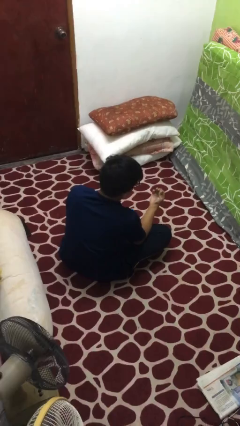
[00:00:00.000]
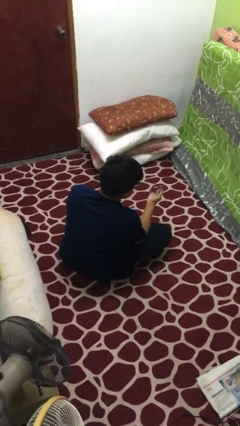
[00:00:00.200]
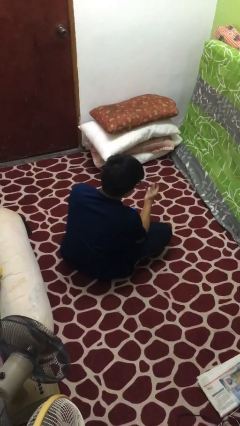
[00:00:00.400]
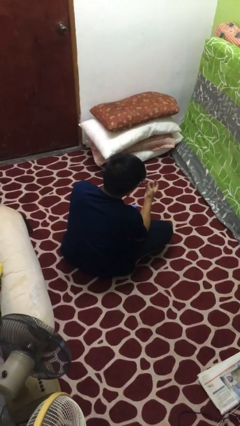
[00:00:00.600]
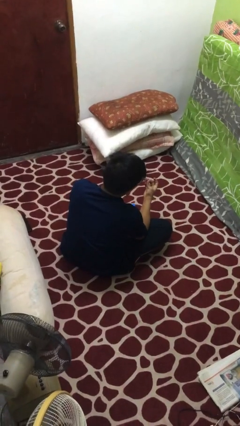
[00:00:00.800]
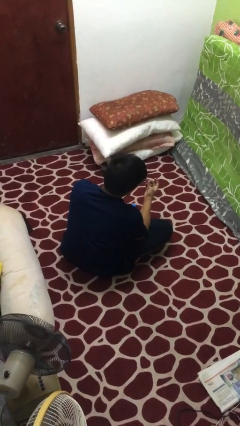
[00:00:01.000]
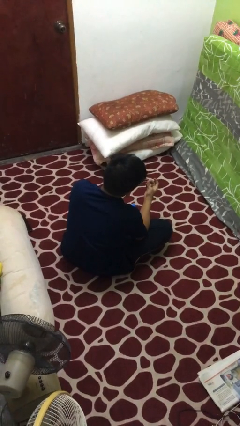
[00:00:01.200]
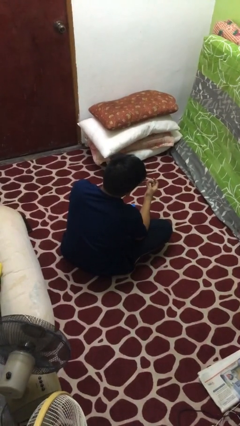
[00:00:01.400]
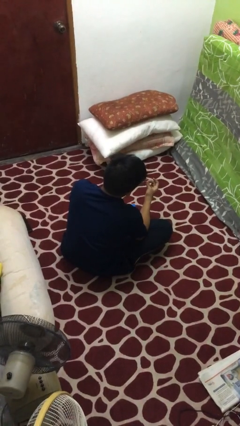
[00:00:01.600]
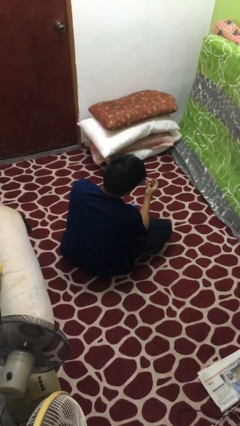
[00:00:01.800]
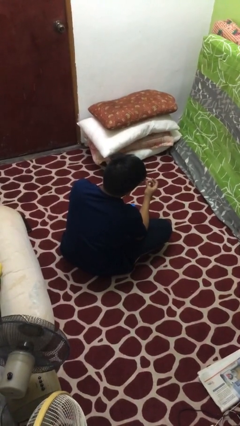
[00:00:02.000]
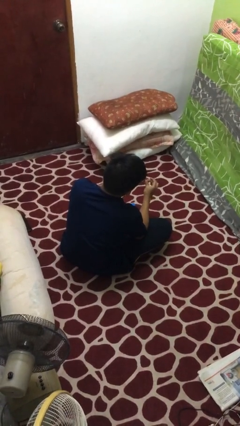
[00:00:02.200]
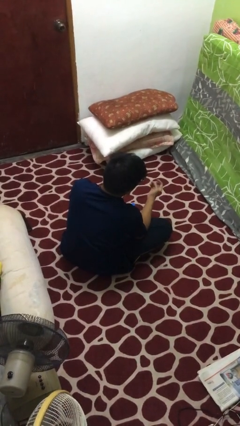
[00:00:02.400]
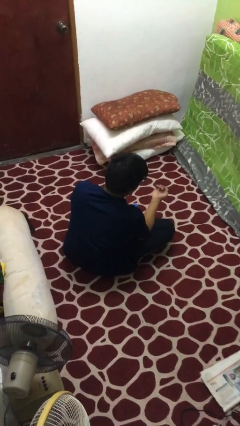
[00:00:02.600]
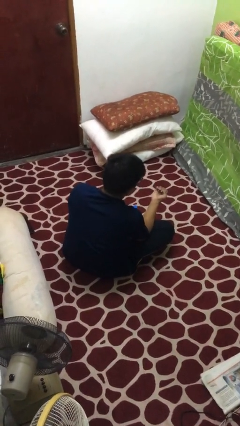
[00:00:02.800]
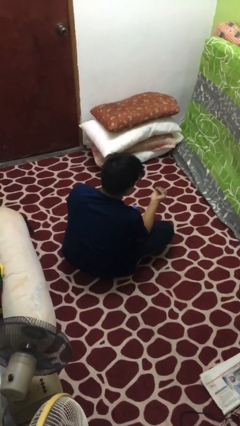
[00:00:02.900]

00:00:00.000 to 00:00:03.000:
person clips fingernails

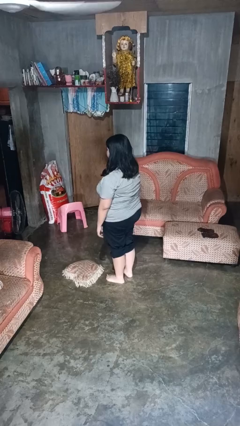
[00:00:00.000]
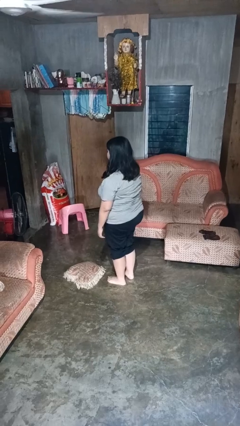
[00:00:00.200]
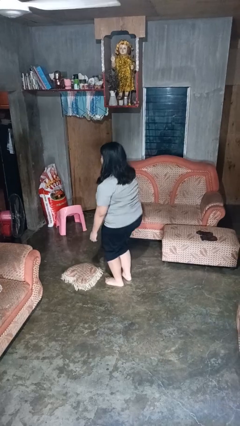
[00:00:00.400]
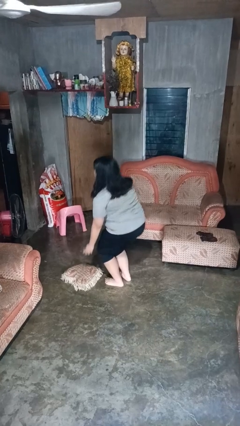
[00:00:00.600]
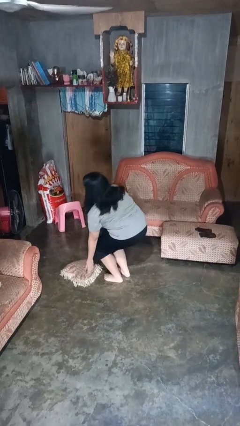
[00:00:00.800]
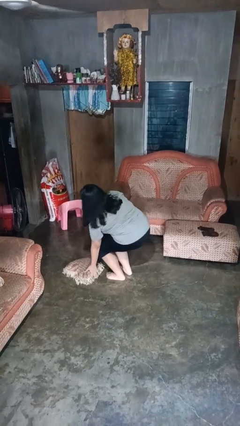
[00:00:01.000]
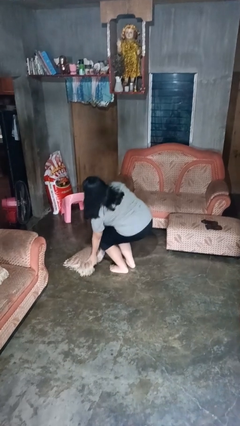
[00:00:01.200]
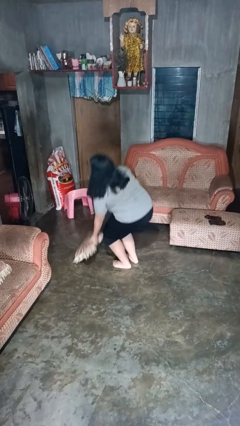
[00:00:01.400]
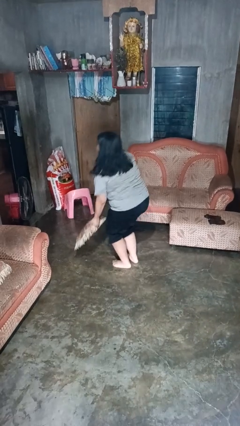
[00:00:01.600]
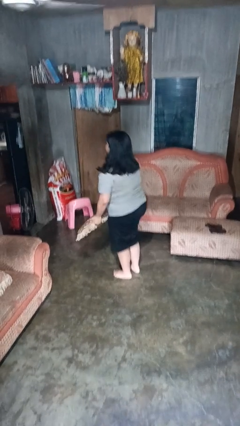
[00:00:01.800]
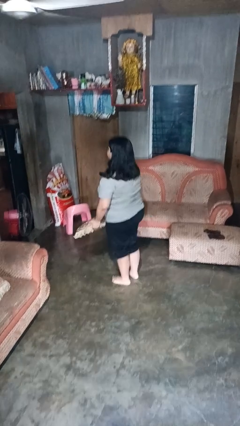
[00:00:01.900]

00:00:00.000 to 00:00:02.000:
person picks up object from floor

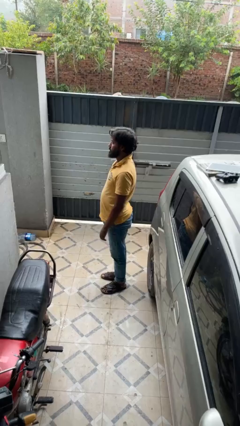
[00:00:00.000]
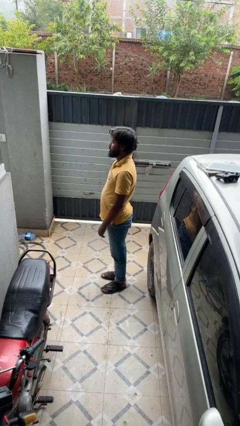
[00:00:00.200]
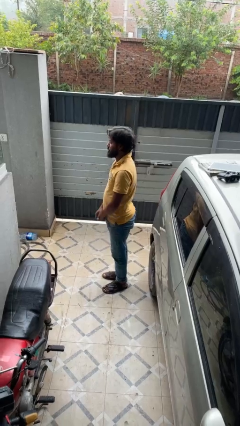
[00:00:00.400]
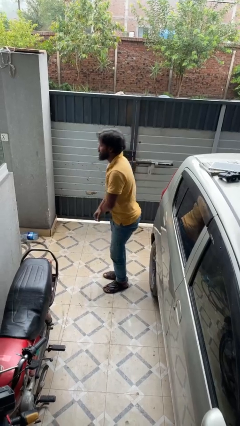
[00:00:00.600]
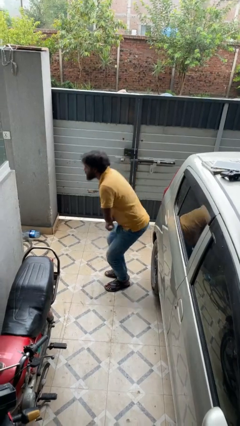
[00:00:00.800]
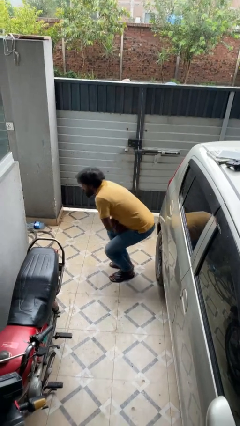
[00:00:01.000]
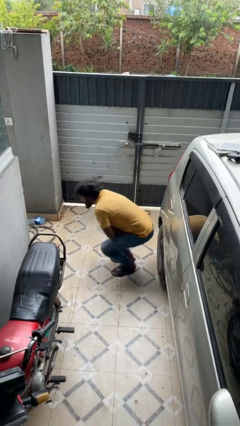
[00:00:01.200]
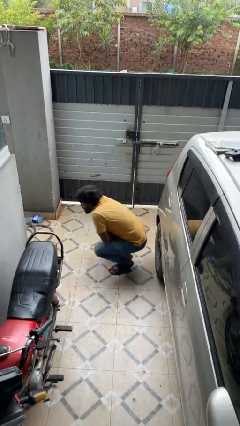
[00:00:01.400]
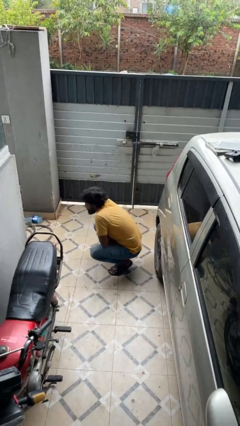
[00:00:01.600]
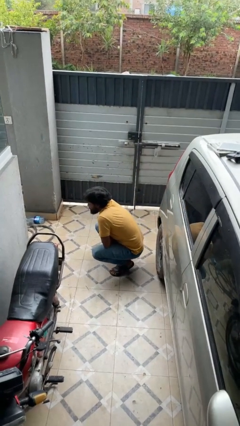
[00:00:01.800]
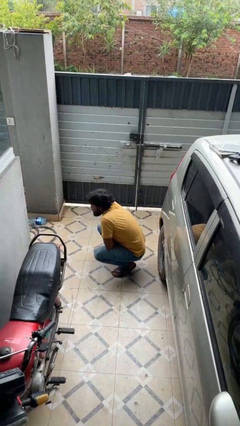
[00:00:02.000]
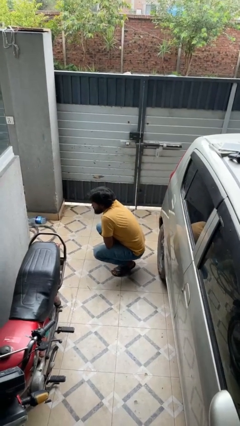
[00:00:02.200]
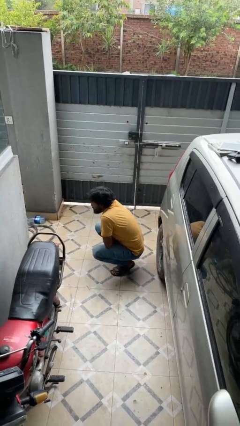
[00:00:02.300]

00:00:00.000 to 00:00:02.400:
person squats

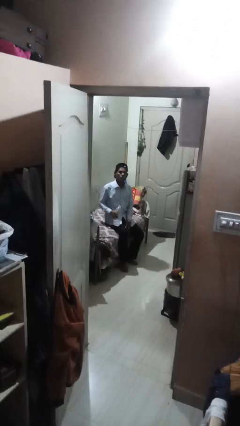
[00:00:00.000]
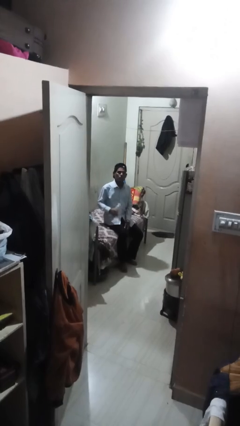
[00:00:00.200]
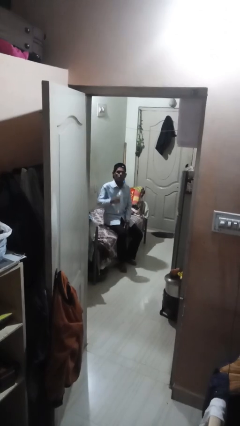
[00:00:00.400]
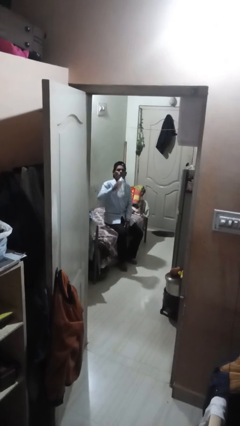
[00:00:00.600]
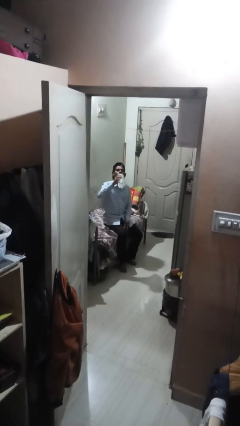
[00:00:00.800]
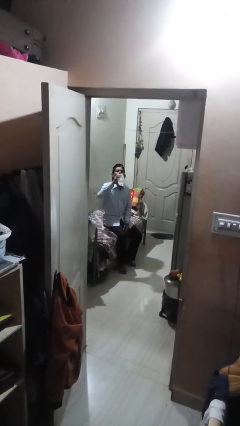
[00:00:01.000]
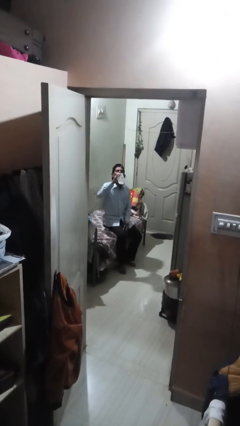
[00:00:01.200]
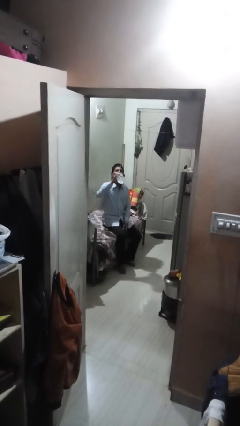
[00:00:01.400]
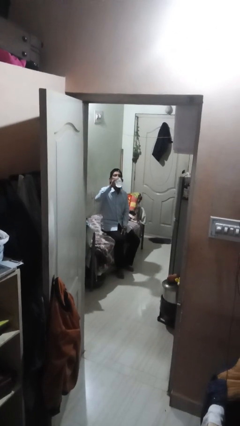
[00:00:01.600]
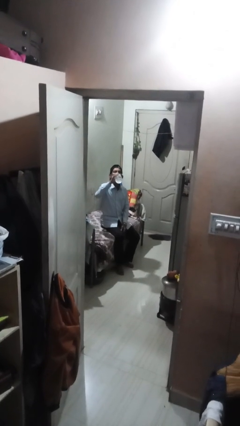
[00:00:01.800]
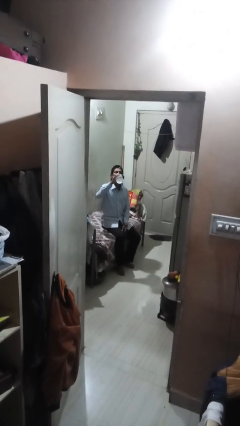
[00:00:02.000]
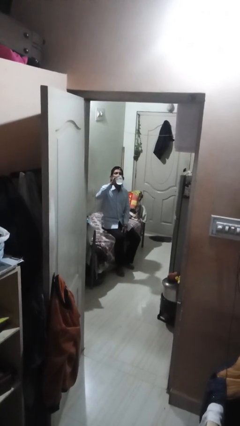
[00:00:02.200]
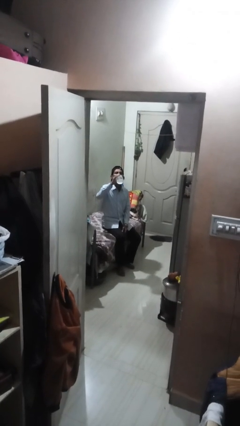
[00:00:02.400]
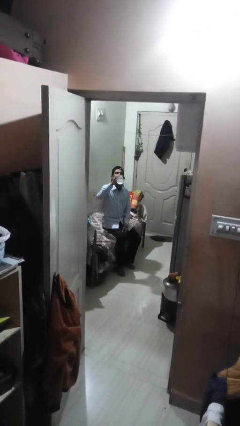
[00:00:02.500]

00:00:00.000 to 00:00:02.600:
person drinks from bottle

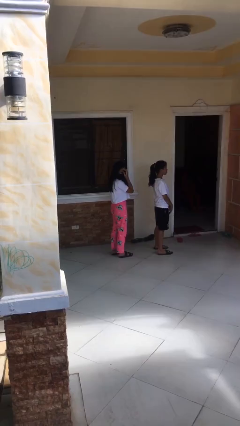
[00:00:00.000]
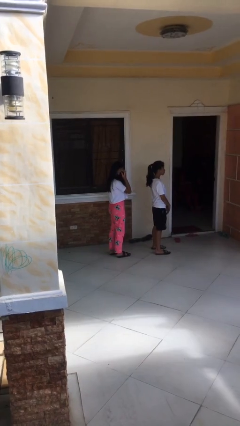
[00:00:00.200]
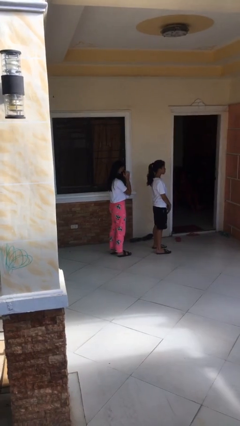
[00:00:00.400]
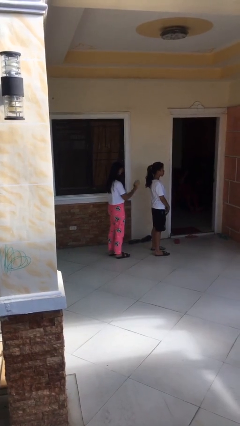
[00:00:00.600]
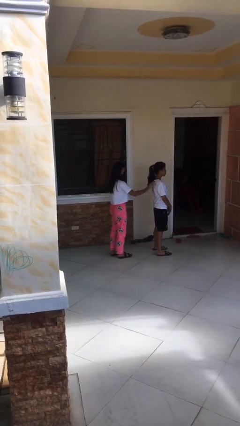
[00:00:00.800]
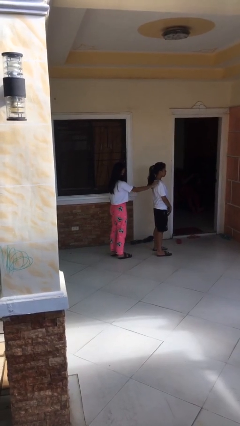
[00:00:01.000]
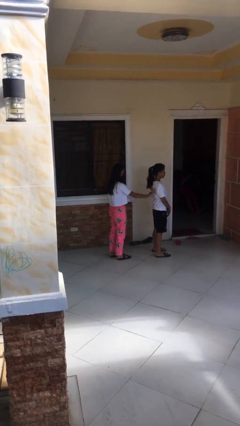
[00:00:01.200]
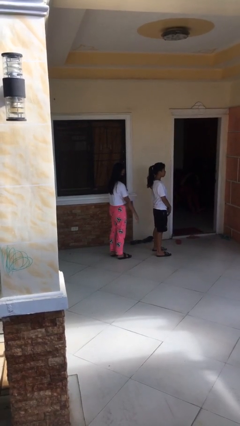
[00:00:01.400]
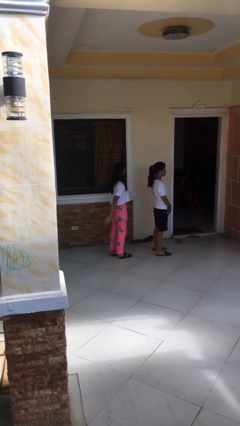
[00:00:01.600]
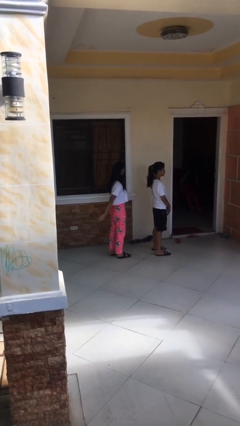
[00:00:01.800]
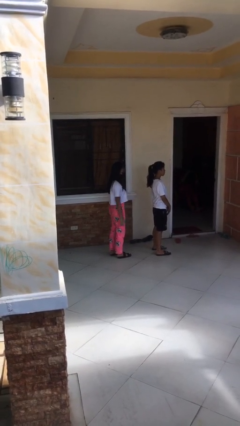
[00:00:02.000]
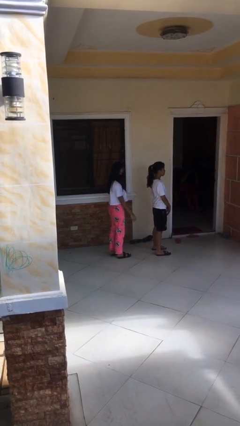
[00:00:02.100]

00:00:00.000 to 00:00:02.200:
person touches back of person

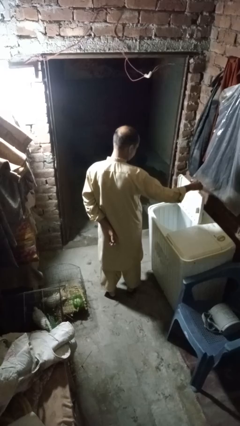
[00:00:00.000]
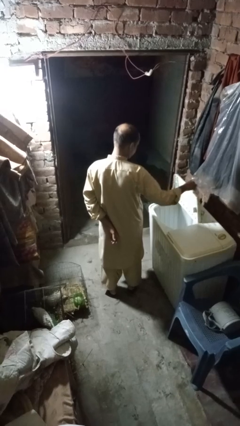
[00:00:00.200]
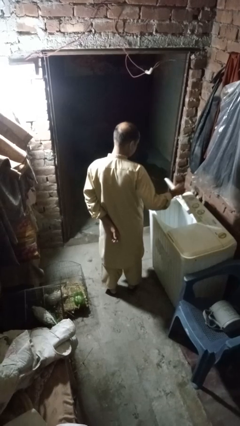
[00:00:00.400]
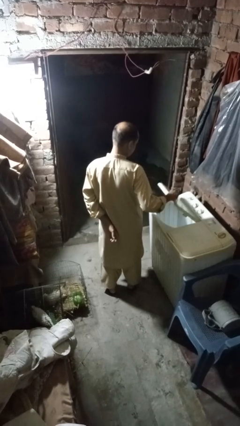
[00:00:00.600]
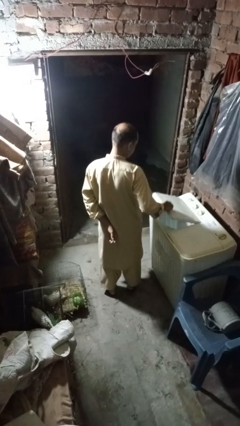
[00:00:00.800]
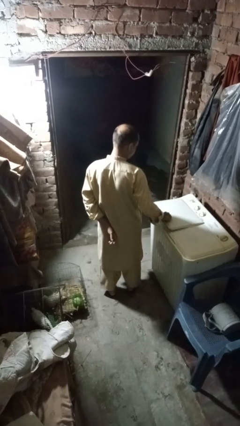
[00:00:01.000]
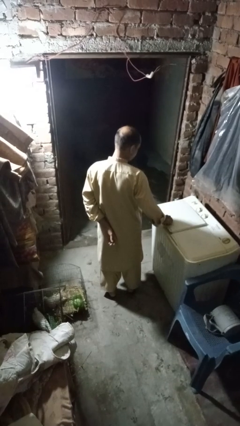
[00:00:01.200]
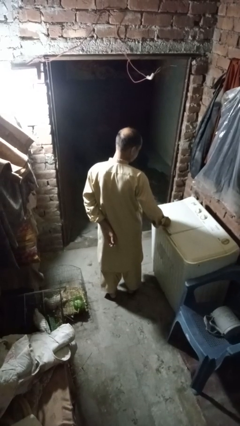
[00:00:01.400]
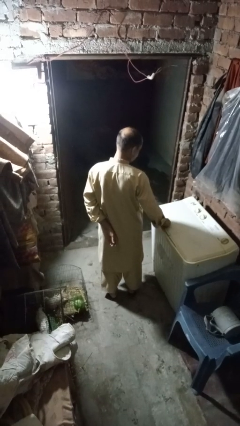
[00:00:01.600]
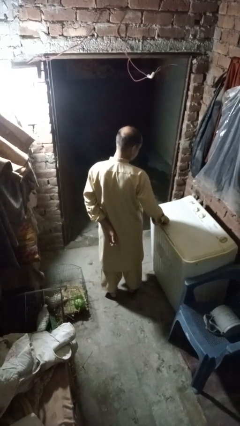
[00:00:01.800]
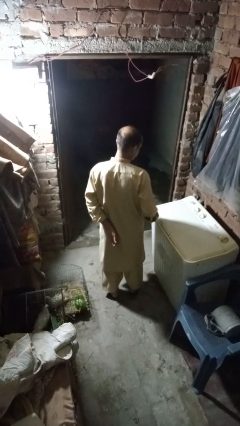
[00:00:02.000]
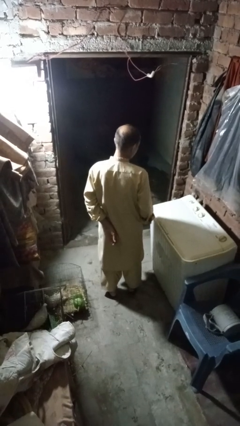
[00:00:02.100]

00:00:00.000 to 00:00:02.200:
person closes clothes washer

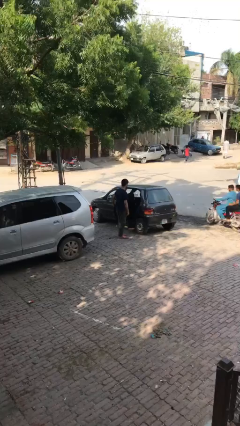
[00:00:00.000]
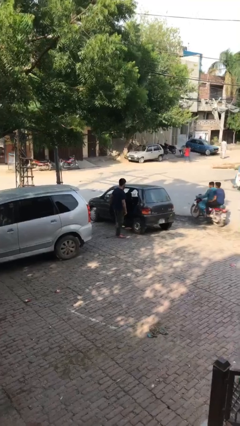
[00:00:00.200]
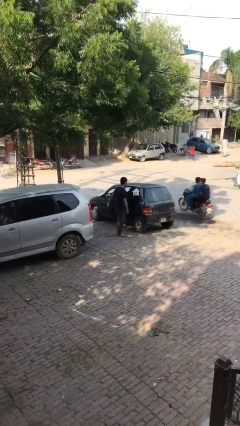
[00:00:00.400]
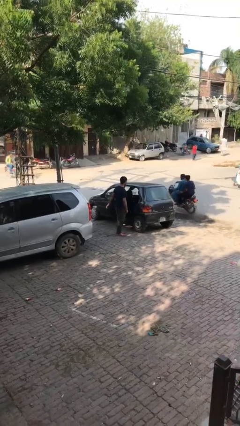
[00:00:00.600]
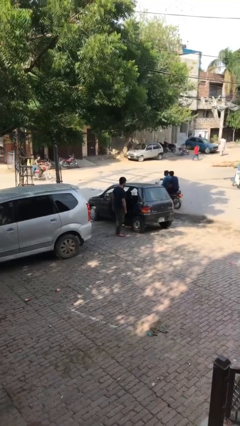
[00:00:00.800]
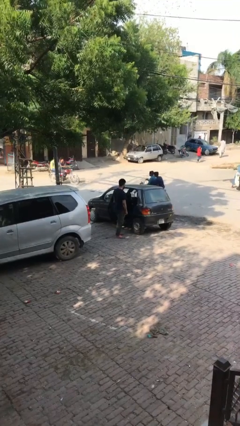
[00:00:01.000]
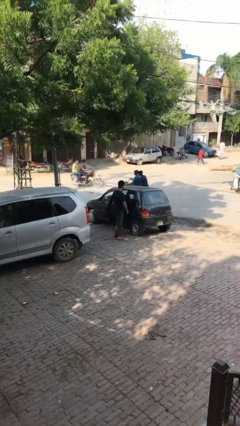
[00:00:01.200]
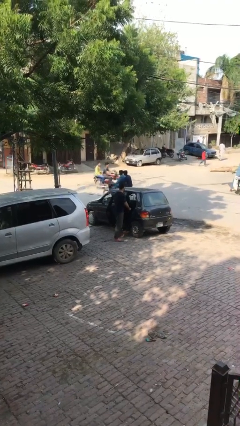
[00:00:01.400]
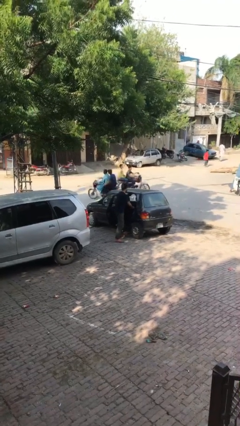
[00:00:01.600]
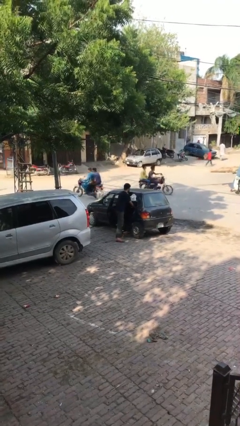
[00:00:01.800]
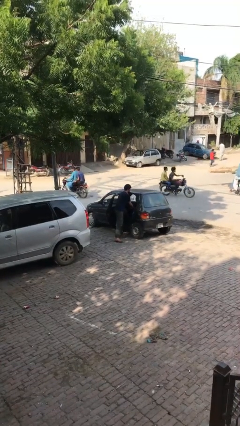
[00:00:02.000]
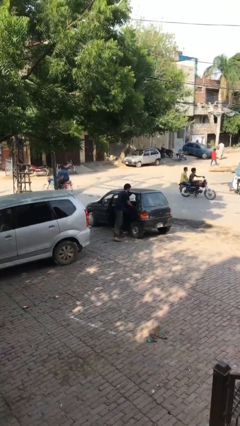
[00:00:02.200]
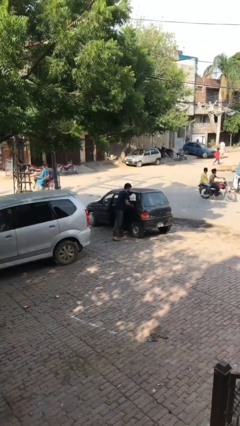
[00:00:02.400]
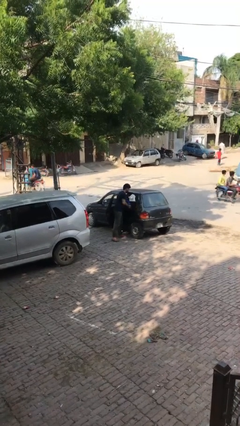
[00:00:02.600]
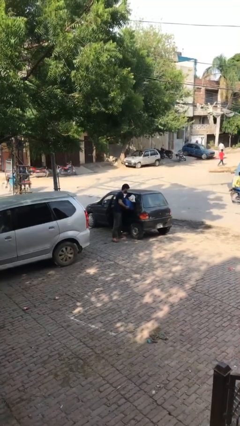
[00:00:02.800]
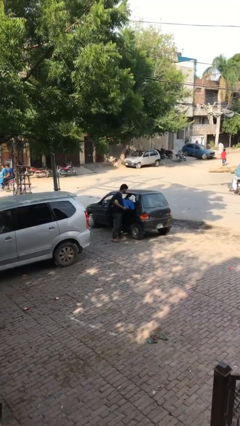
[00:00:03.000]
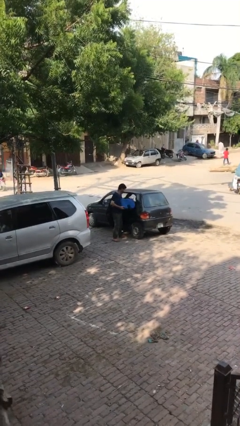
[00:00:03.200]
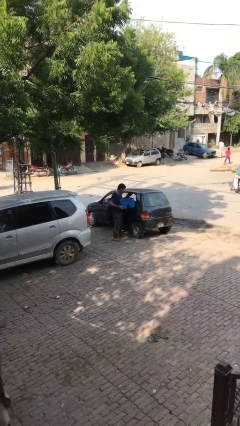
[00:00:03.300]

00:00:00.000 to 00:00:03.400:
person unloads car
